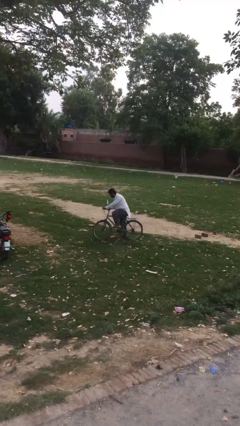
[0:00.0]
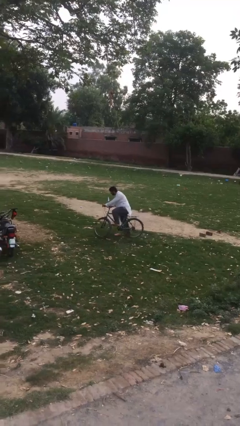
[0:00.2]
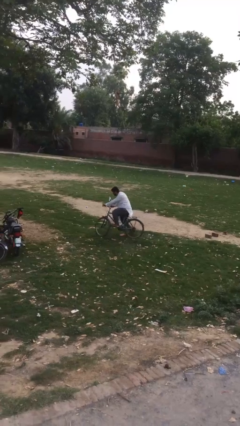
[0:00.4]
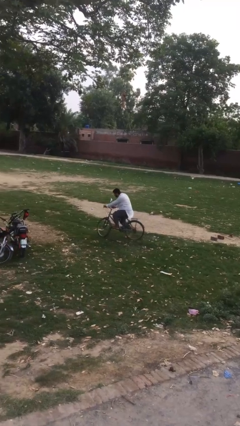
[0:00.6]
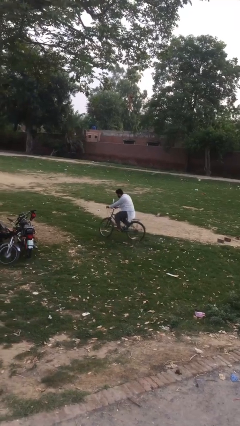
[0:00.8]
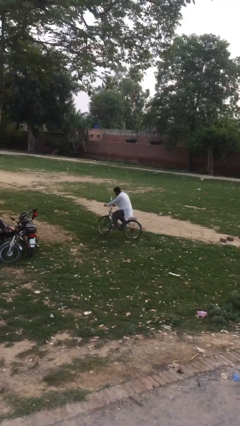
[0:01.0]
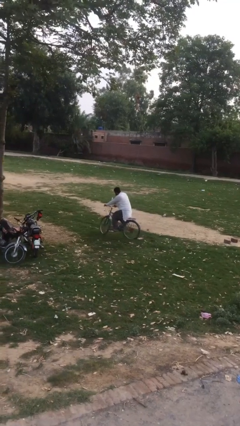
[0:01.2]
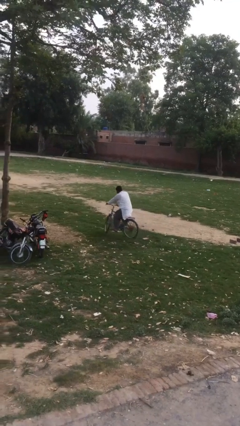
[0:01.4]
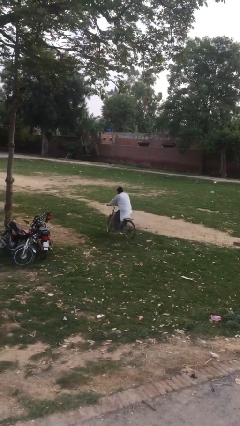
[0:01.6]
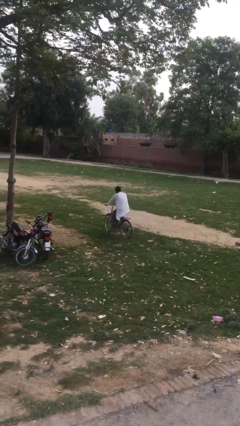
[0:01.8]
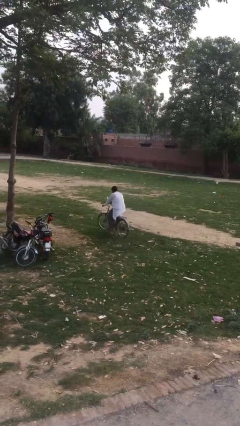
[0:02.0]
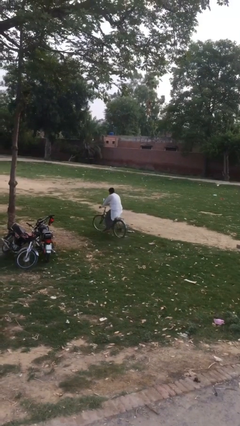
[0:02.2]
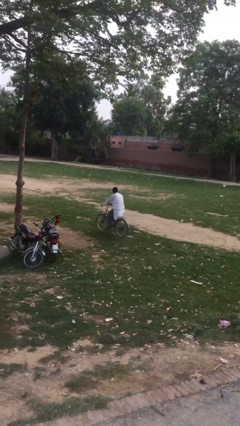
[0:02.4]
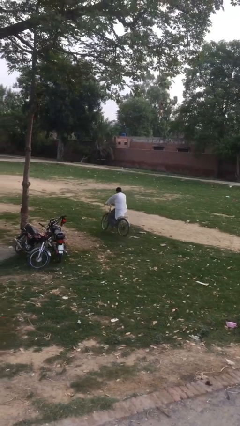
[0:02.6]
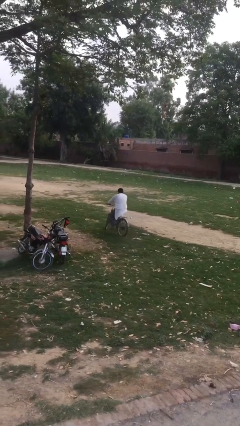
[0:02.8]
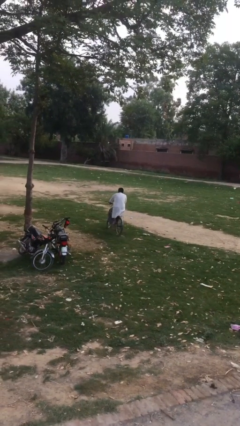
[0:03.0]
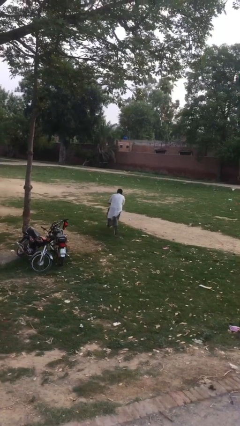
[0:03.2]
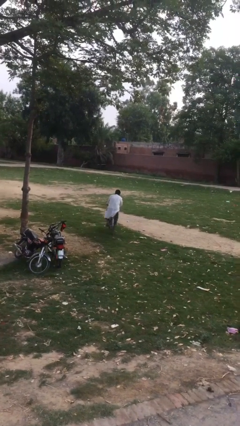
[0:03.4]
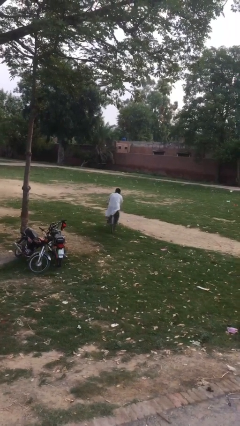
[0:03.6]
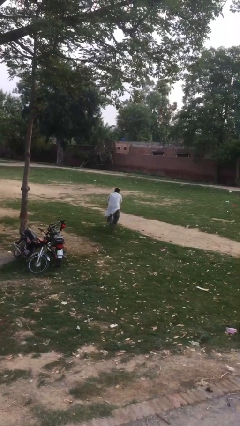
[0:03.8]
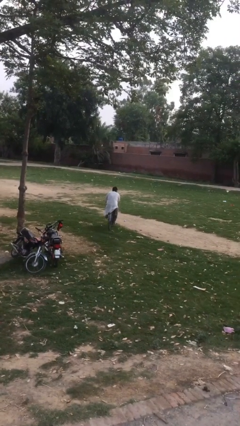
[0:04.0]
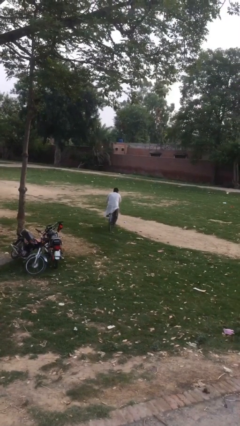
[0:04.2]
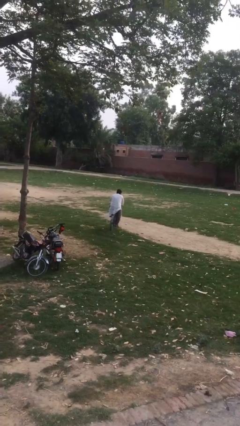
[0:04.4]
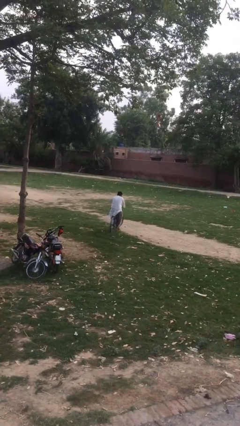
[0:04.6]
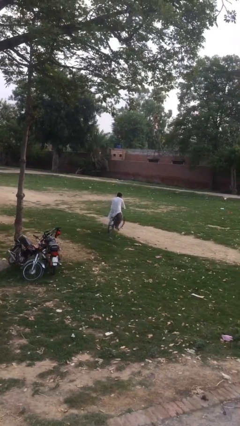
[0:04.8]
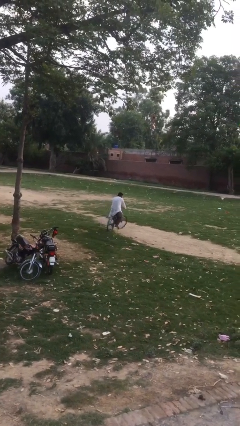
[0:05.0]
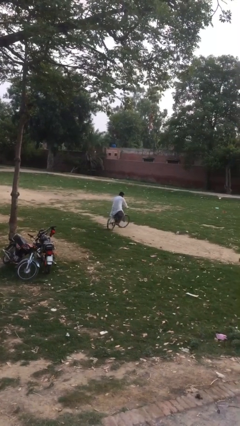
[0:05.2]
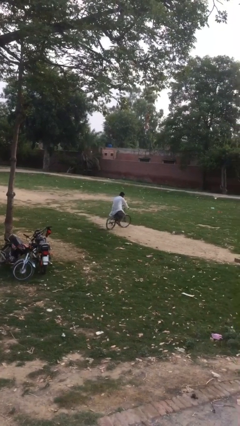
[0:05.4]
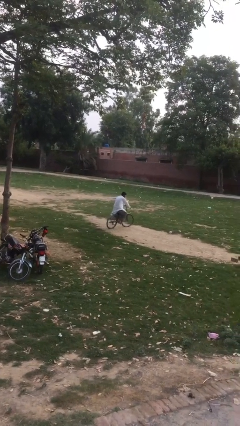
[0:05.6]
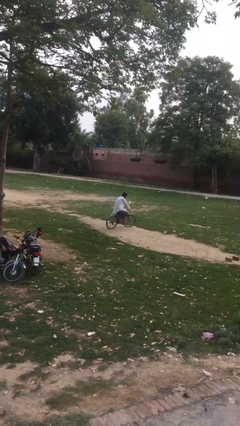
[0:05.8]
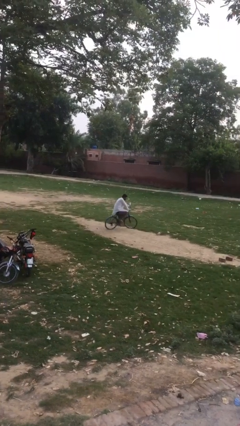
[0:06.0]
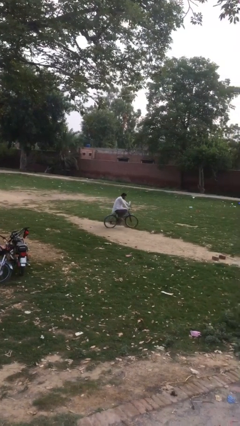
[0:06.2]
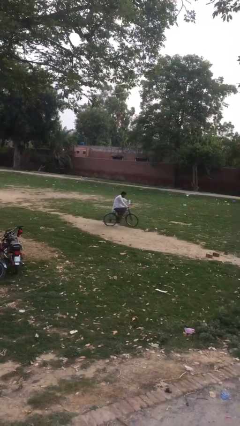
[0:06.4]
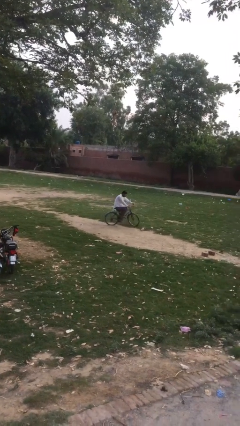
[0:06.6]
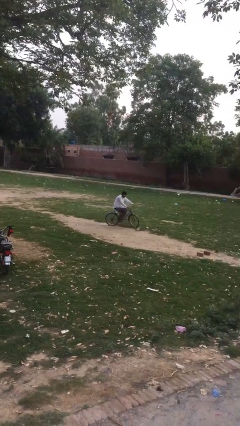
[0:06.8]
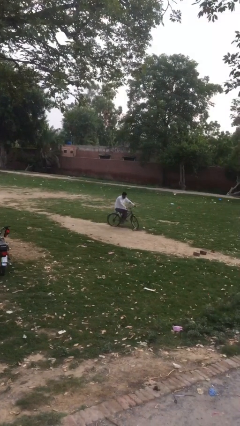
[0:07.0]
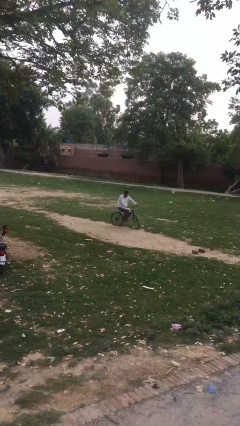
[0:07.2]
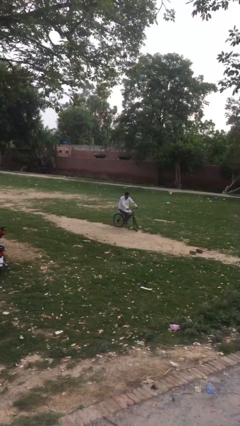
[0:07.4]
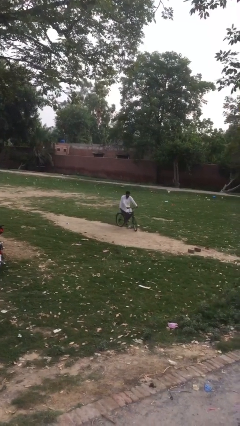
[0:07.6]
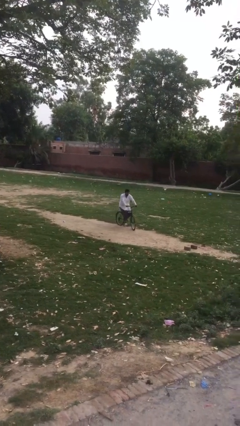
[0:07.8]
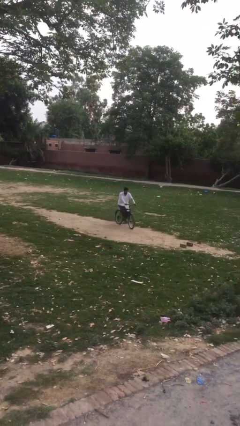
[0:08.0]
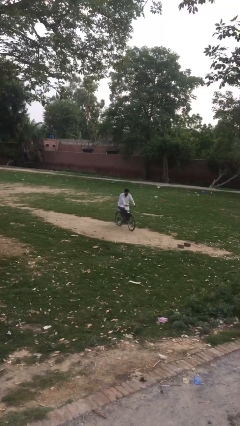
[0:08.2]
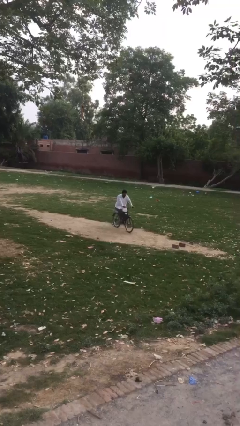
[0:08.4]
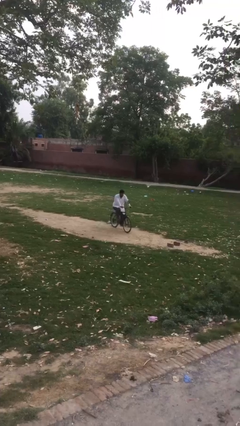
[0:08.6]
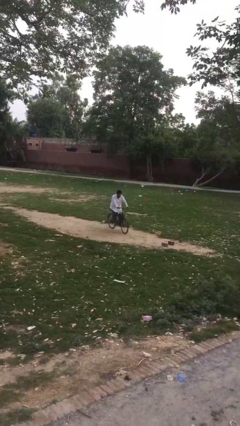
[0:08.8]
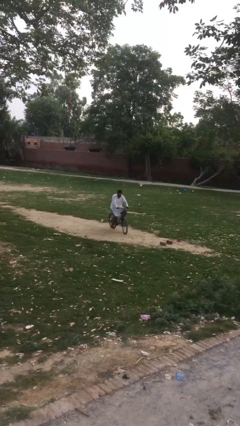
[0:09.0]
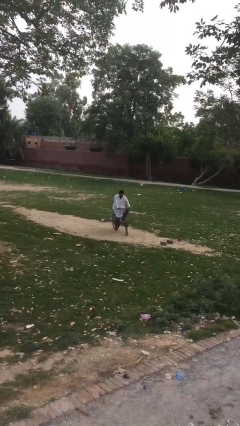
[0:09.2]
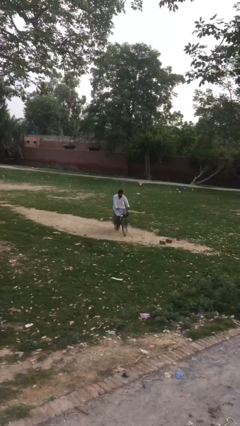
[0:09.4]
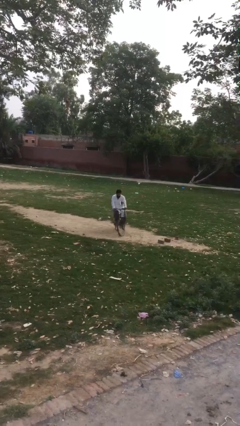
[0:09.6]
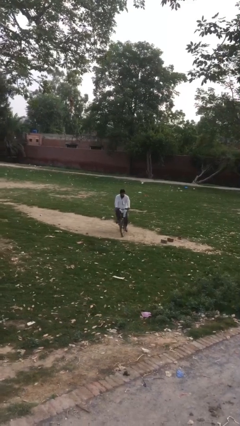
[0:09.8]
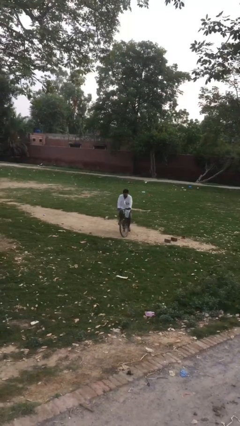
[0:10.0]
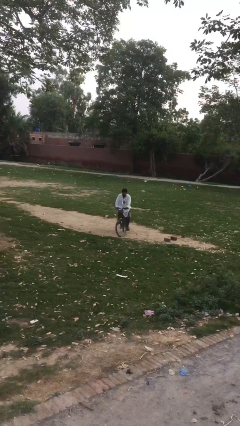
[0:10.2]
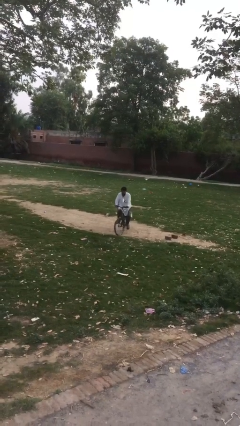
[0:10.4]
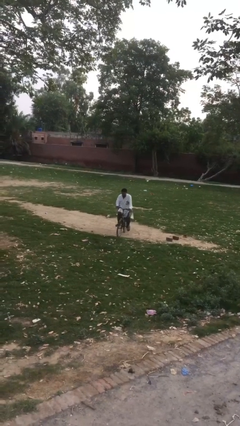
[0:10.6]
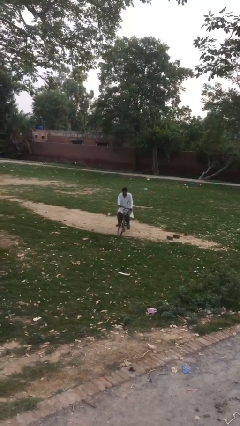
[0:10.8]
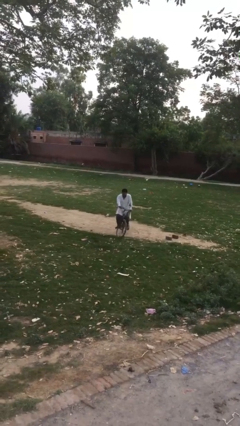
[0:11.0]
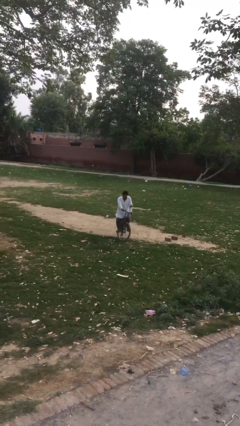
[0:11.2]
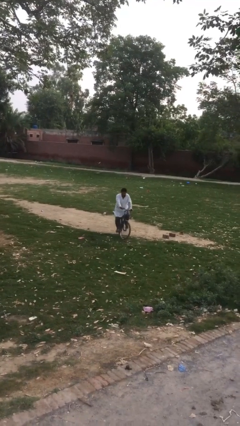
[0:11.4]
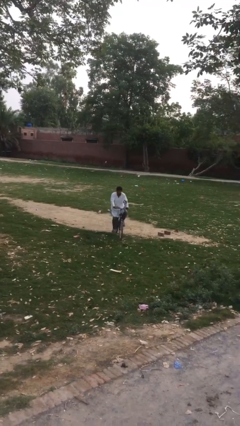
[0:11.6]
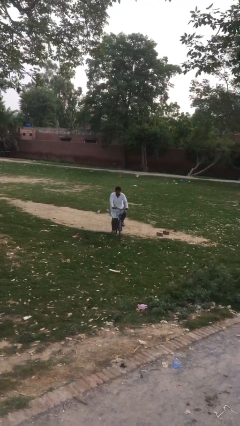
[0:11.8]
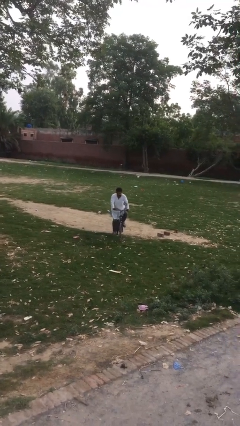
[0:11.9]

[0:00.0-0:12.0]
person rides bicycle

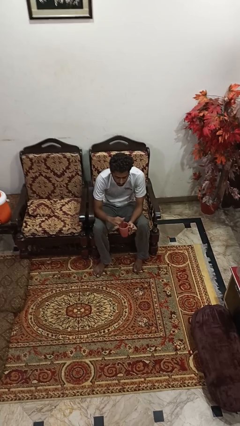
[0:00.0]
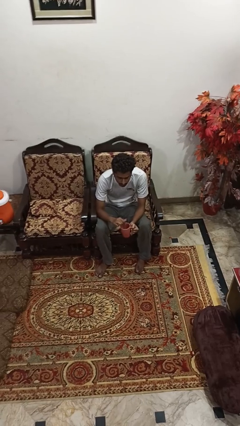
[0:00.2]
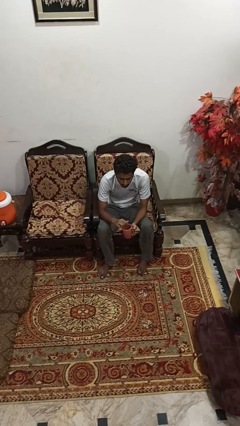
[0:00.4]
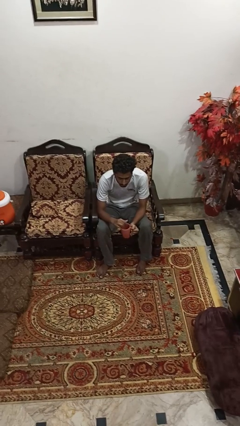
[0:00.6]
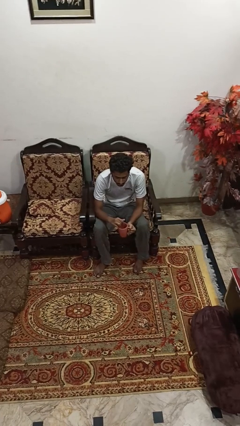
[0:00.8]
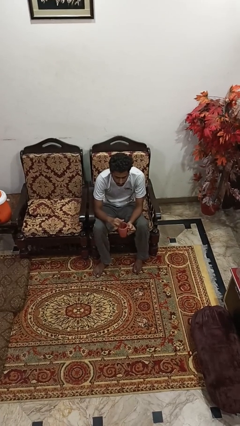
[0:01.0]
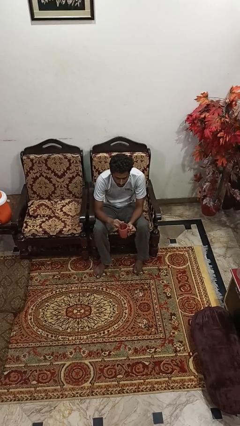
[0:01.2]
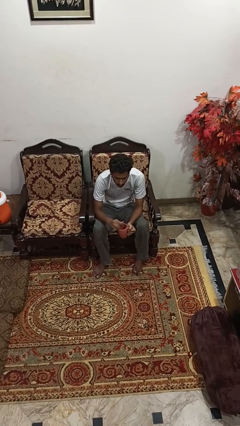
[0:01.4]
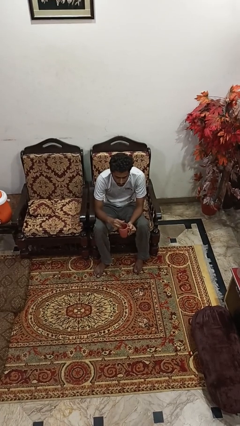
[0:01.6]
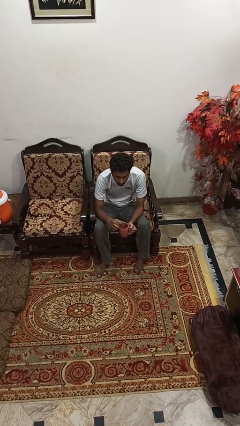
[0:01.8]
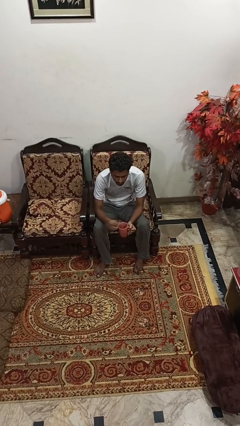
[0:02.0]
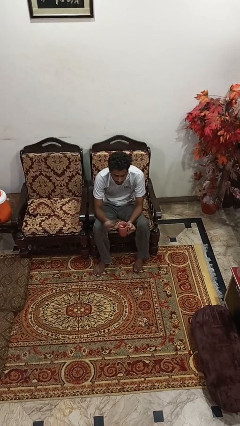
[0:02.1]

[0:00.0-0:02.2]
person stirs mug

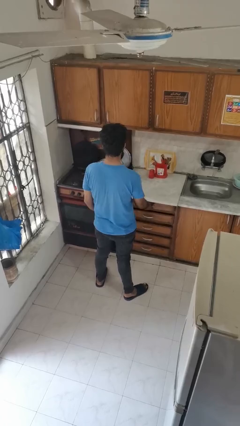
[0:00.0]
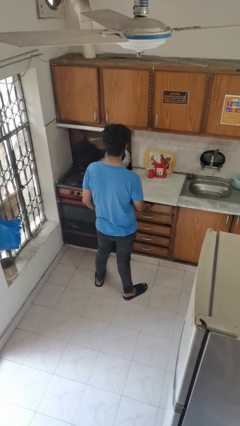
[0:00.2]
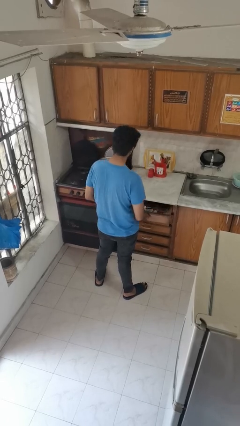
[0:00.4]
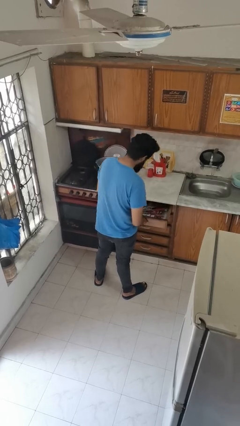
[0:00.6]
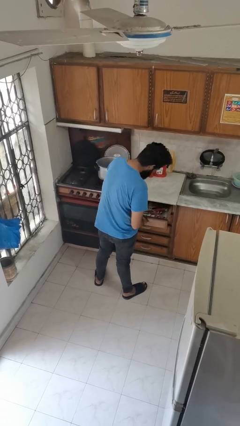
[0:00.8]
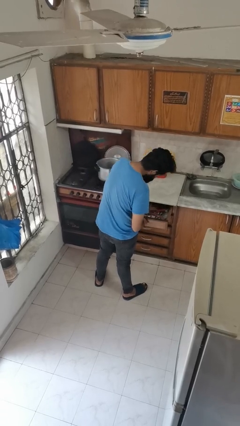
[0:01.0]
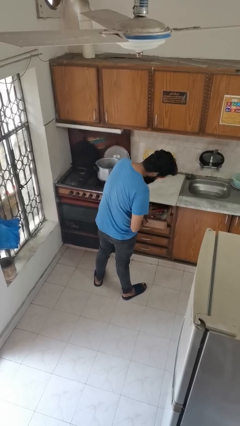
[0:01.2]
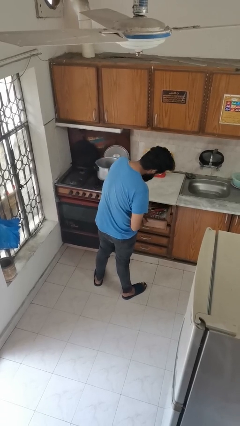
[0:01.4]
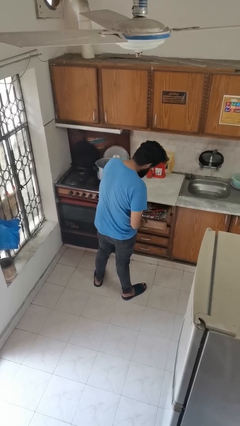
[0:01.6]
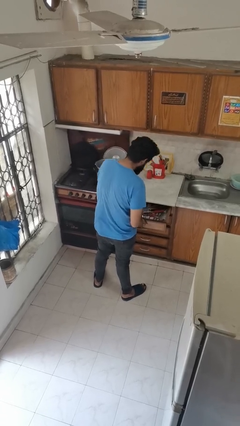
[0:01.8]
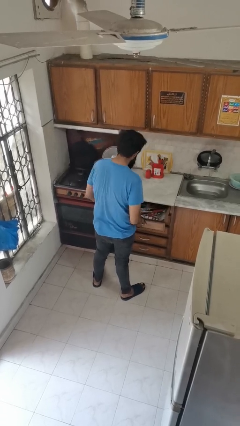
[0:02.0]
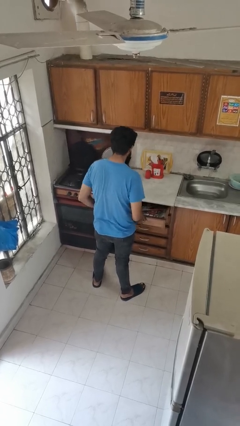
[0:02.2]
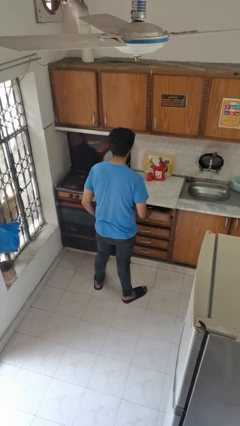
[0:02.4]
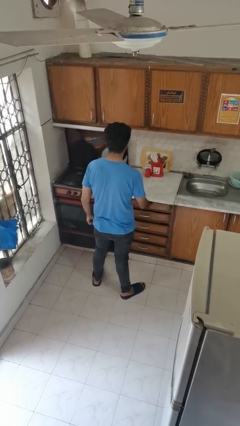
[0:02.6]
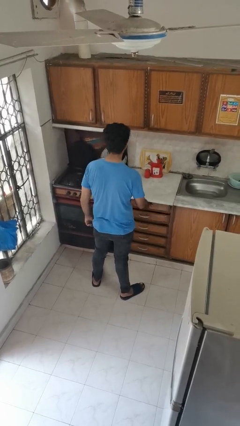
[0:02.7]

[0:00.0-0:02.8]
person searches in kitchen drawer

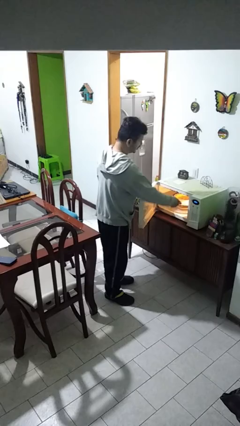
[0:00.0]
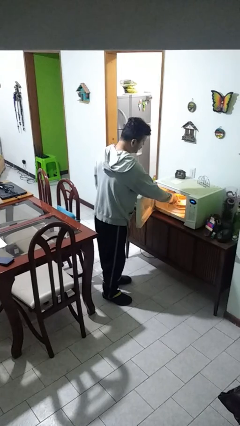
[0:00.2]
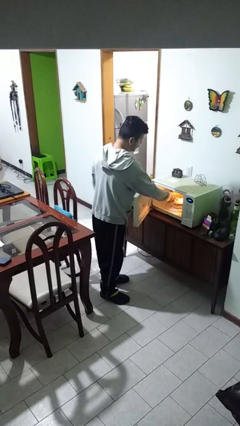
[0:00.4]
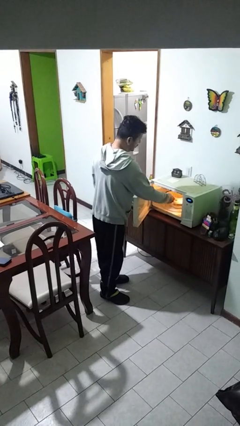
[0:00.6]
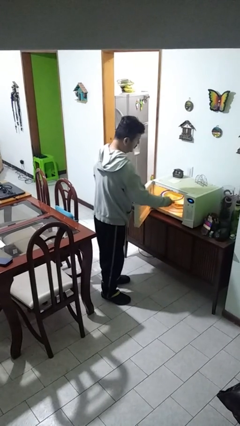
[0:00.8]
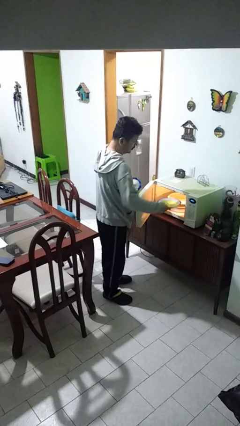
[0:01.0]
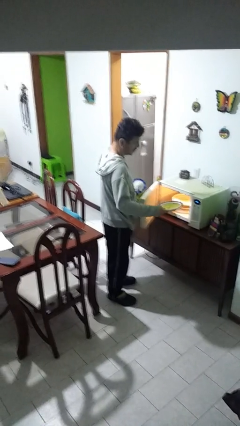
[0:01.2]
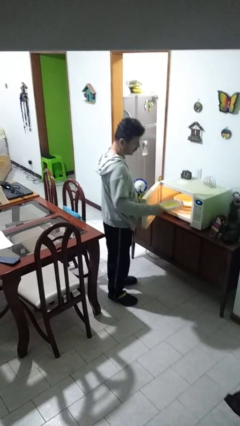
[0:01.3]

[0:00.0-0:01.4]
person takes object from microwave
